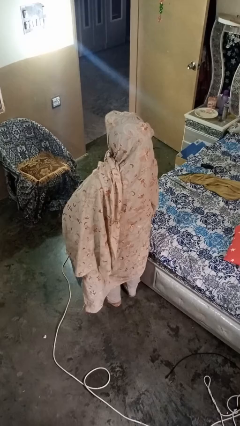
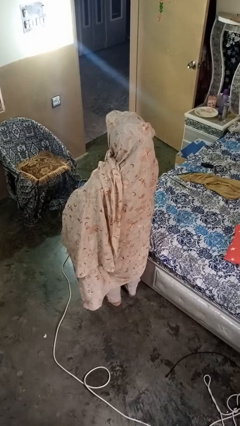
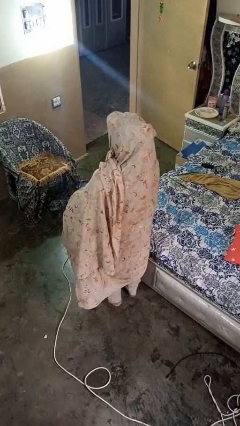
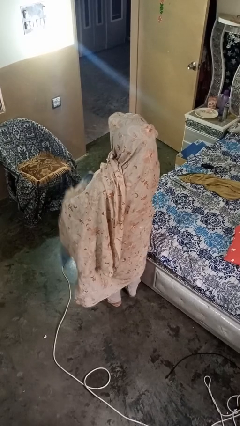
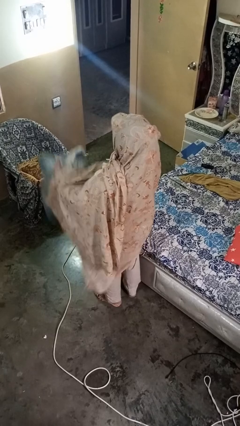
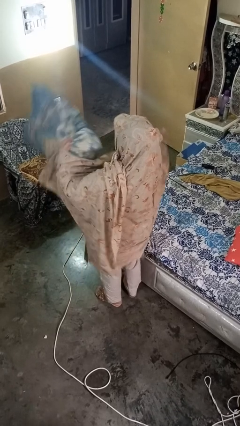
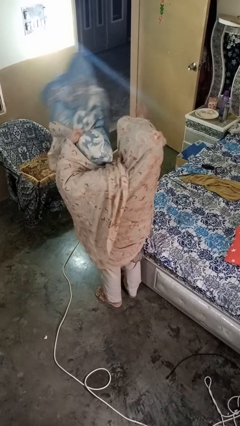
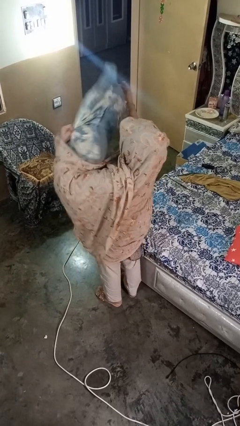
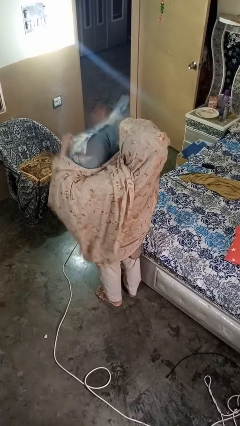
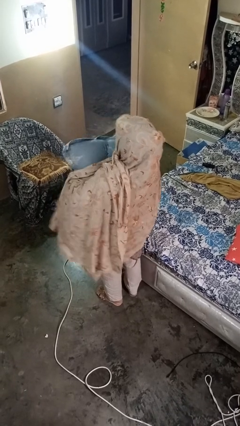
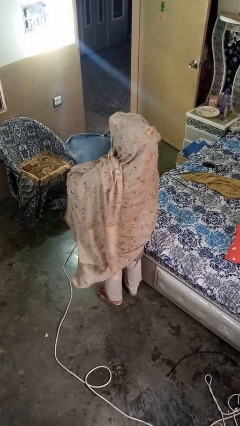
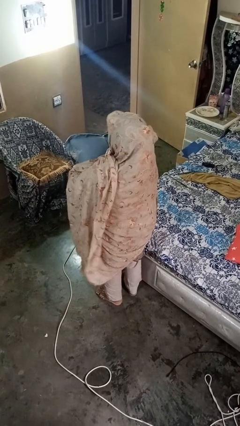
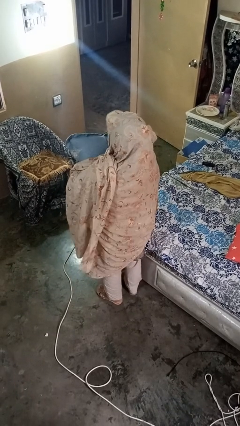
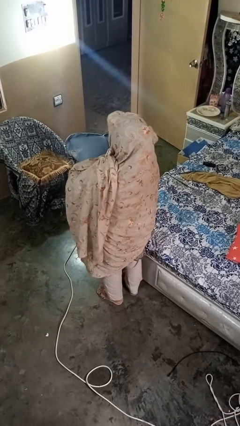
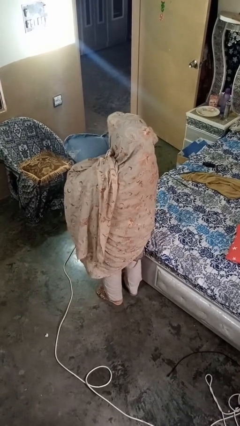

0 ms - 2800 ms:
person squeezes object

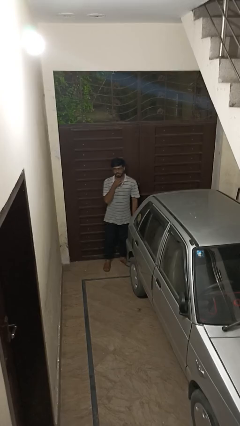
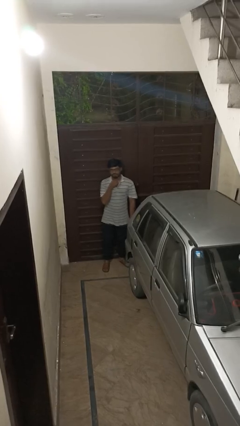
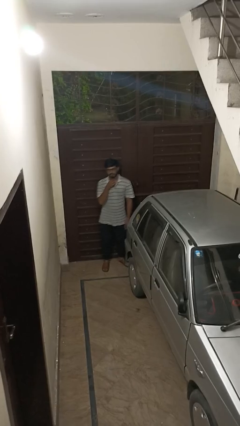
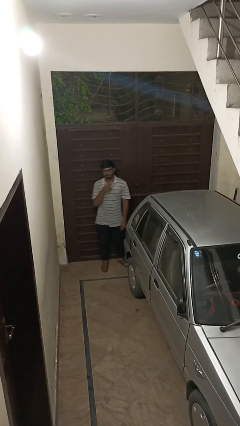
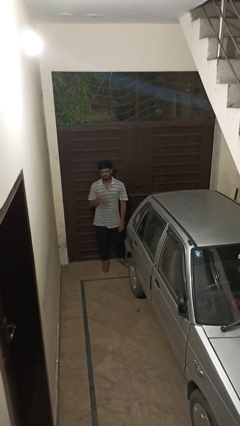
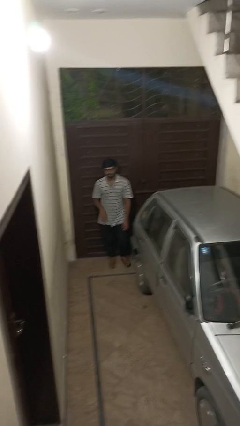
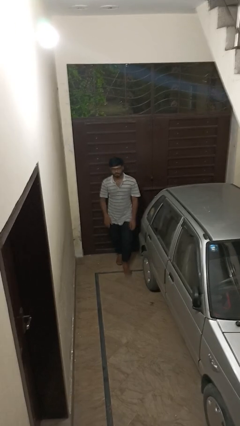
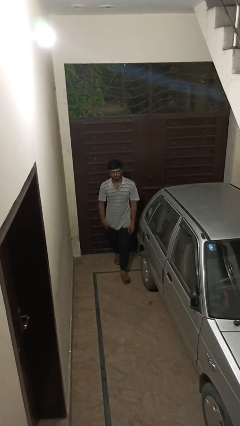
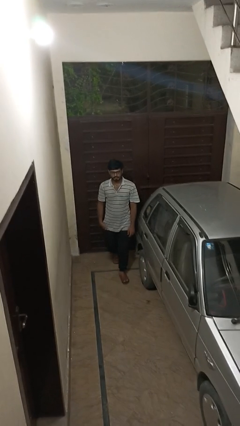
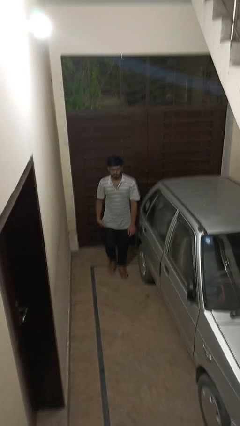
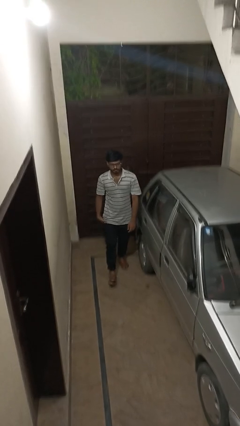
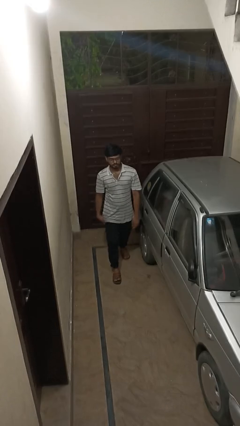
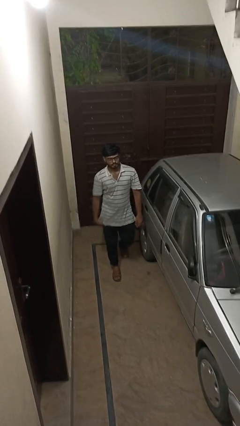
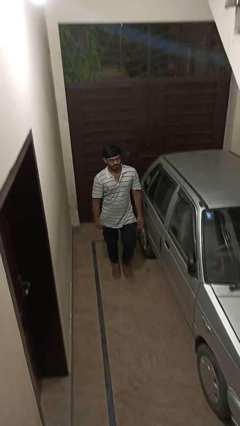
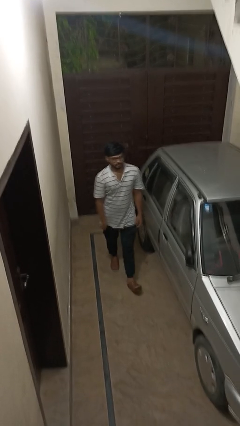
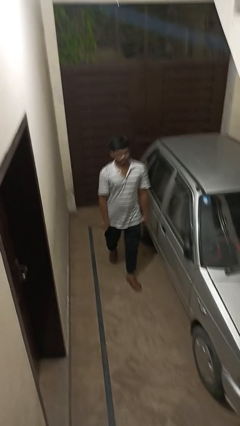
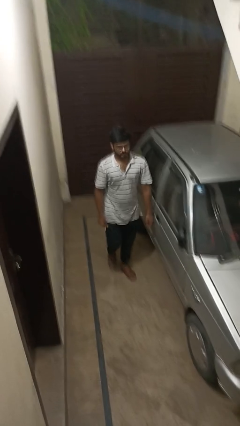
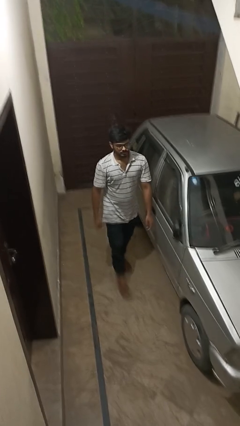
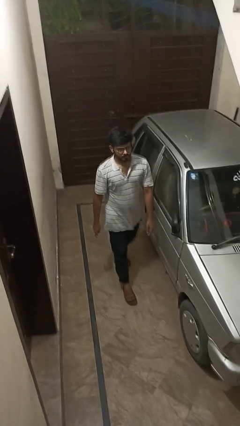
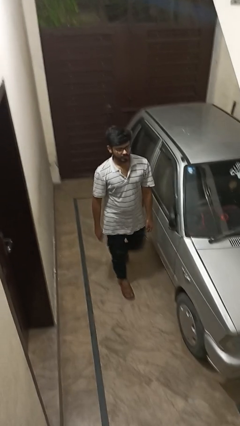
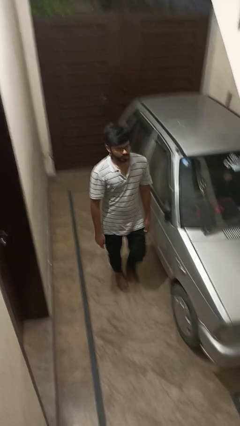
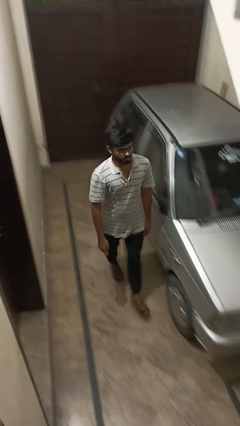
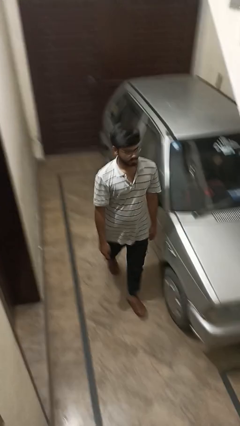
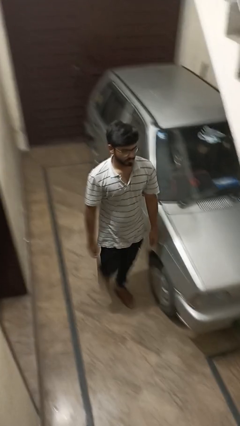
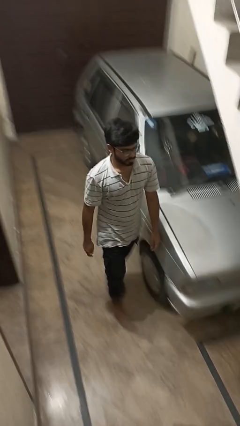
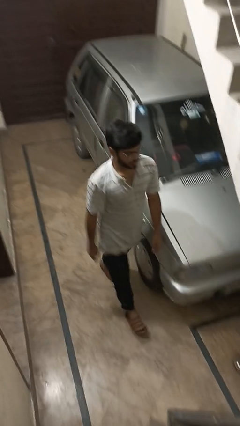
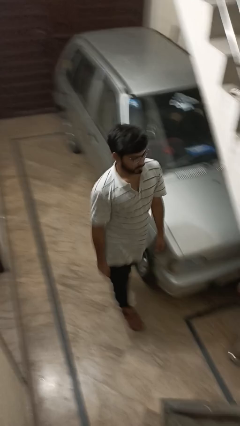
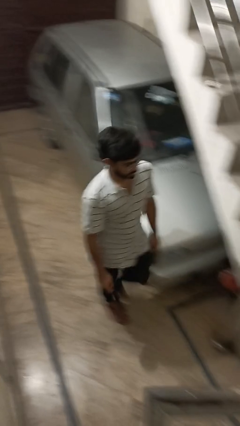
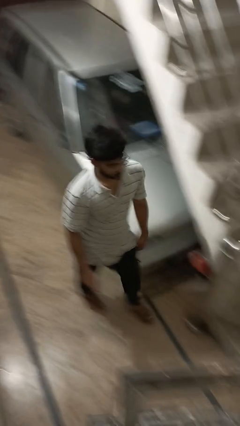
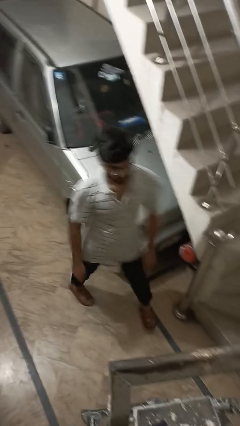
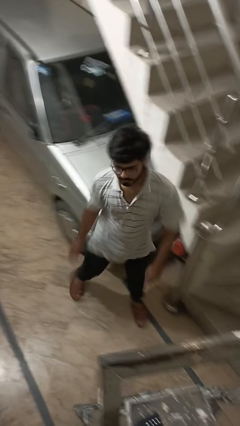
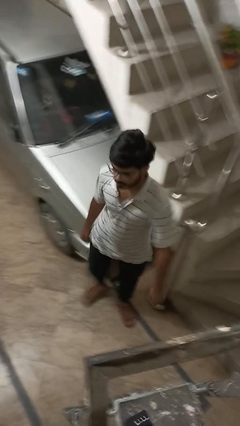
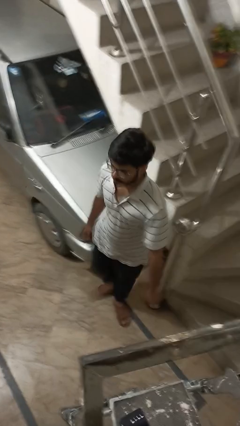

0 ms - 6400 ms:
person walks around car

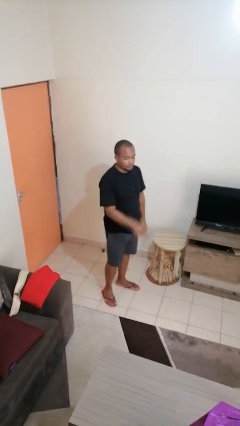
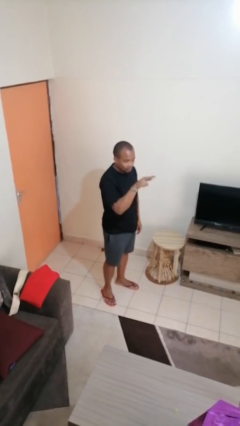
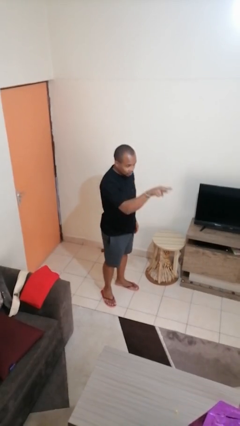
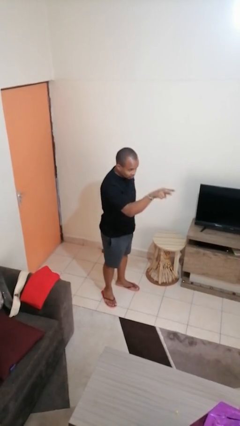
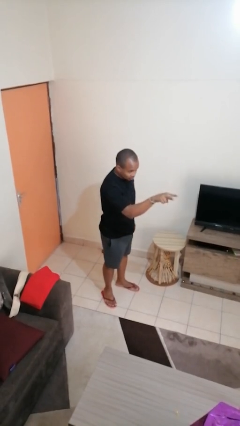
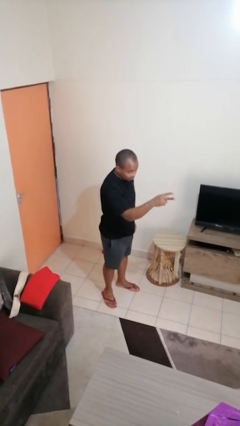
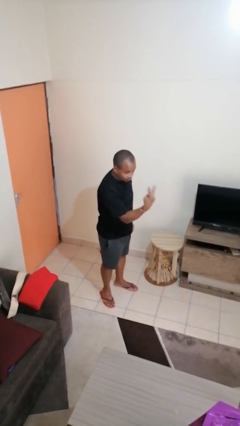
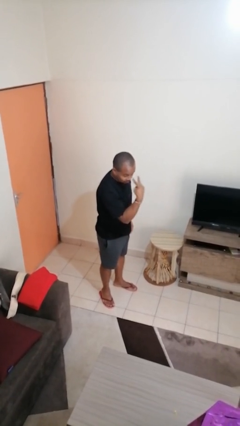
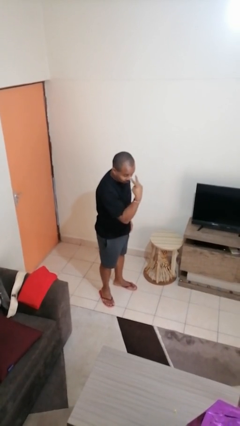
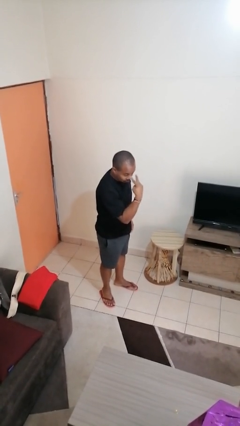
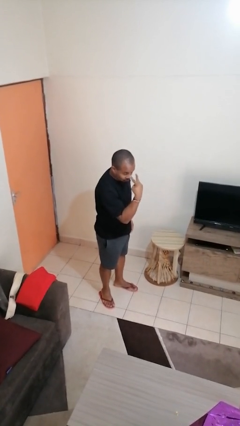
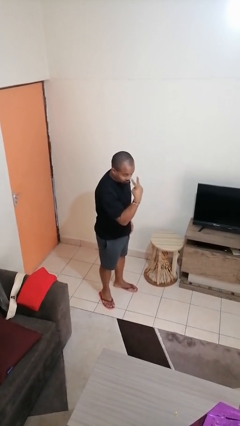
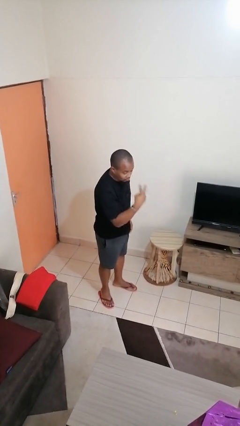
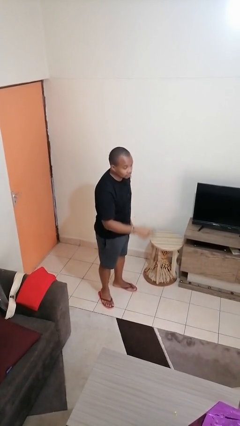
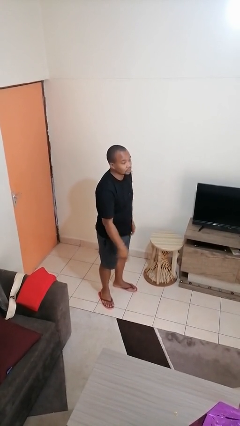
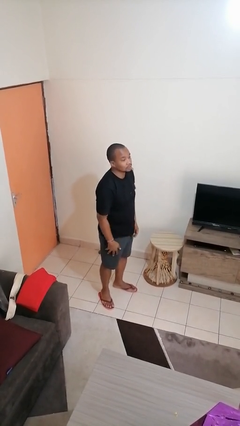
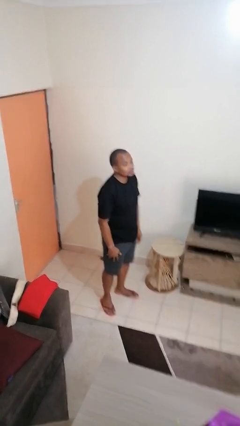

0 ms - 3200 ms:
person gestures watch closely

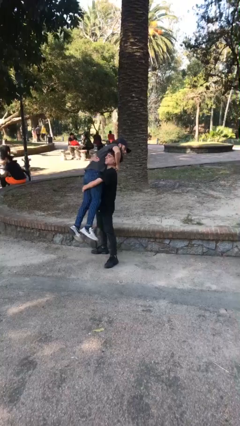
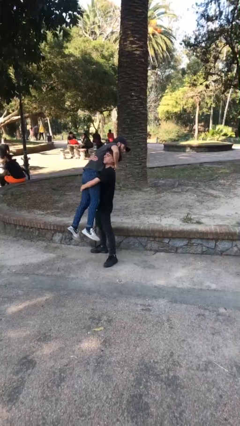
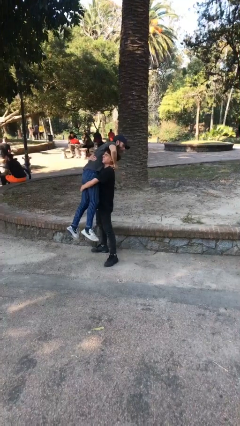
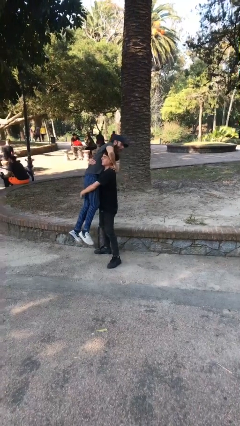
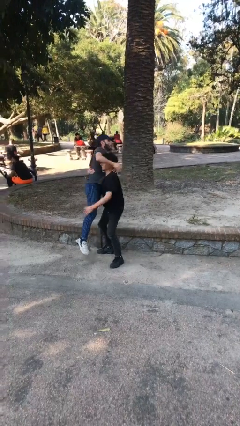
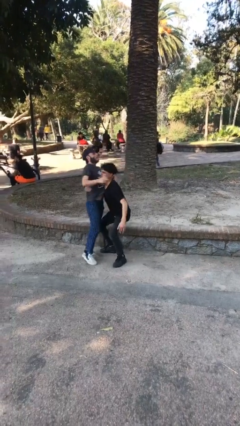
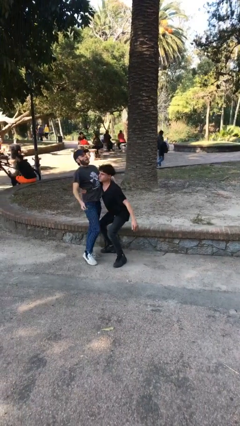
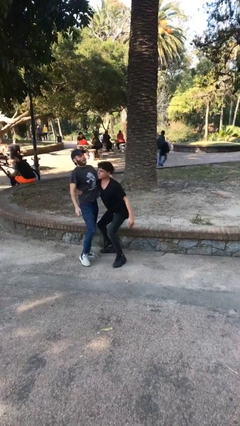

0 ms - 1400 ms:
person puts down person

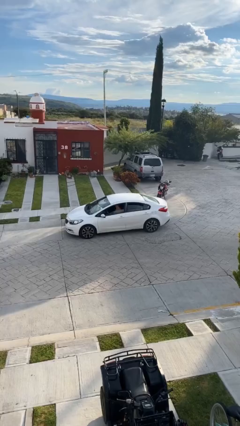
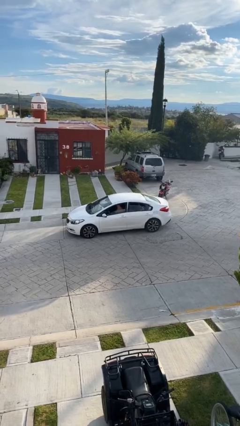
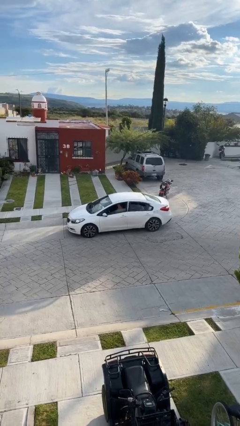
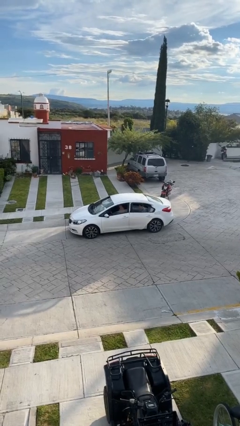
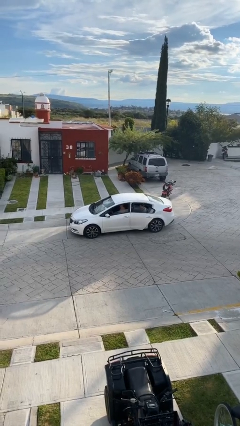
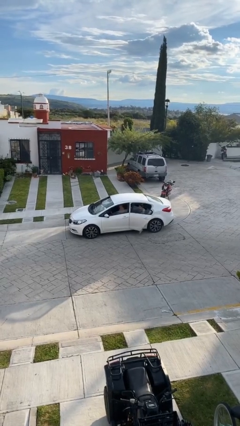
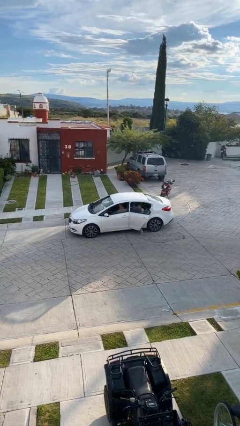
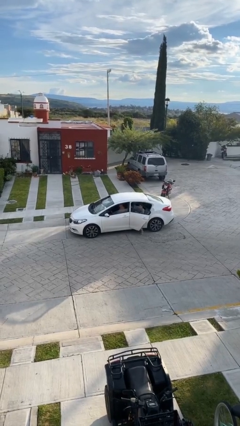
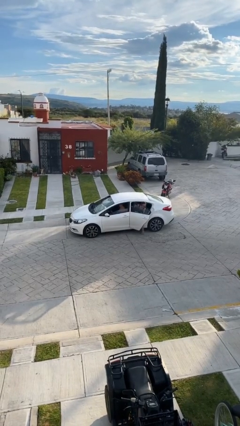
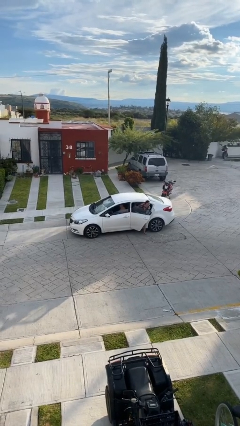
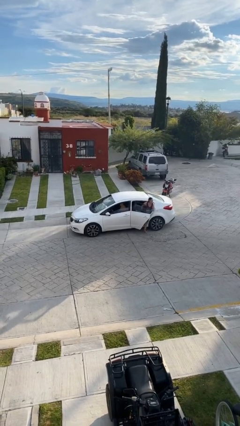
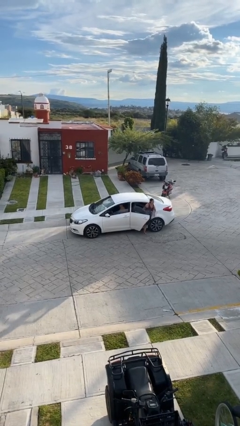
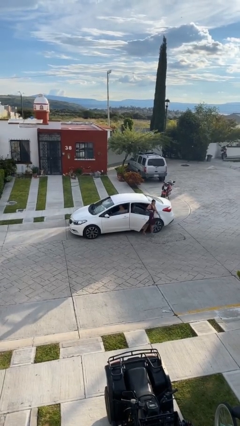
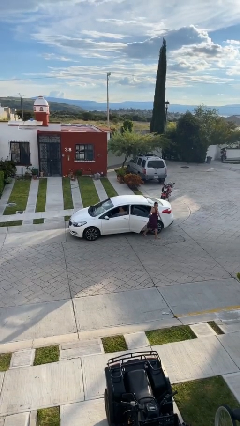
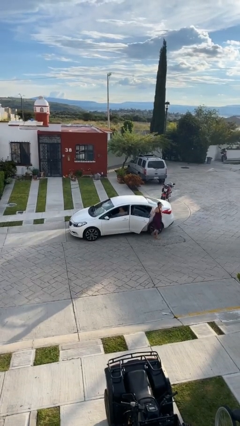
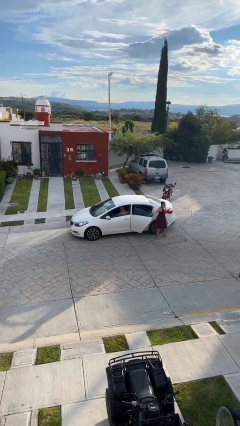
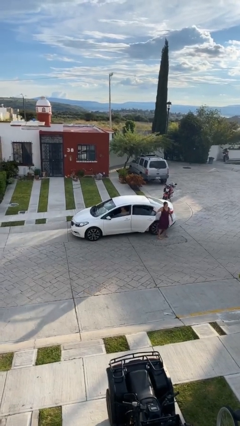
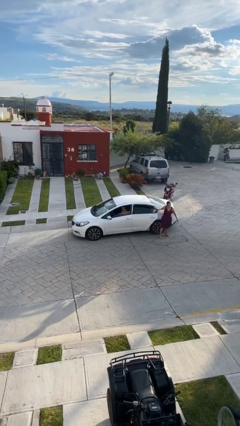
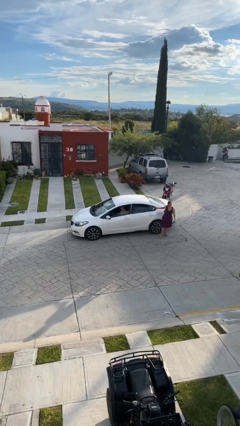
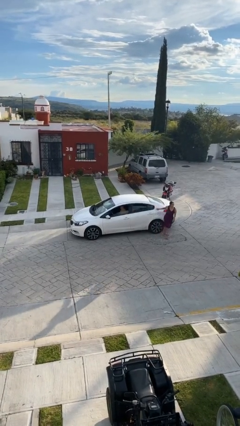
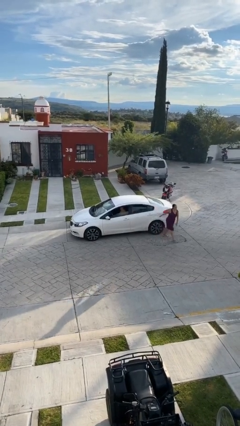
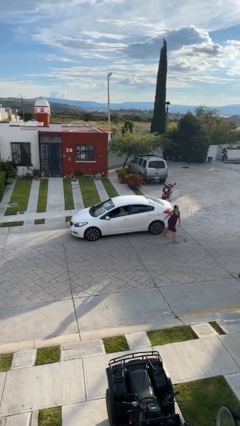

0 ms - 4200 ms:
car drops off person
